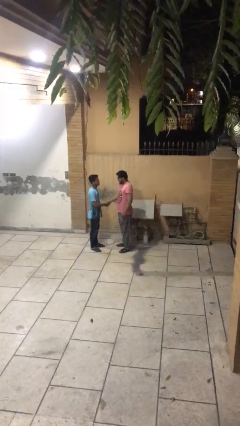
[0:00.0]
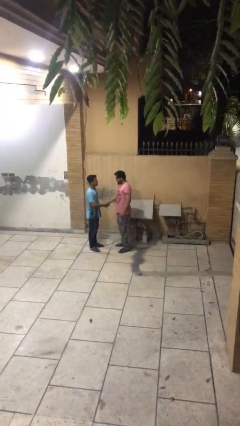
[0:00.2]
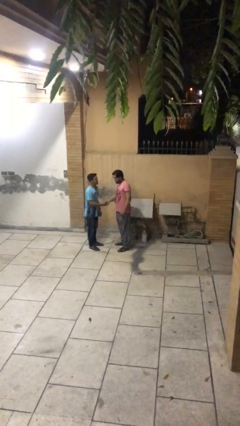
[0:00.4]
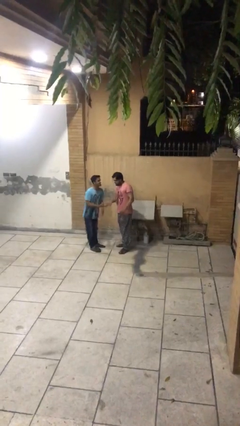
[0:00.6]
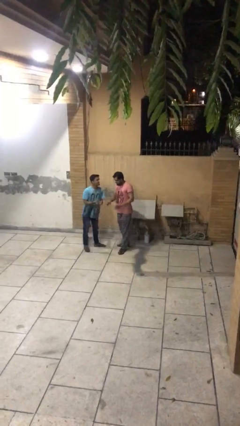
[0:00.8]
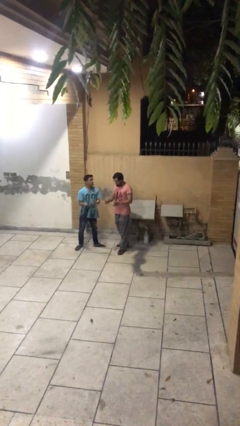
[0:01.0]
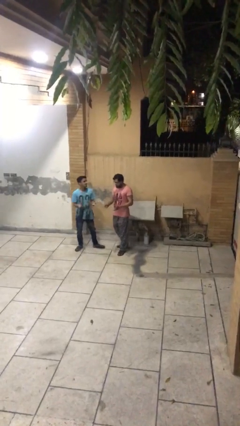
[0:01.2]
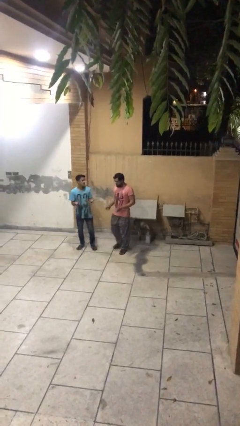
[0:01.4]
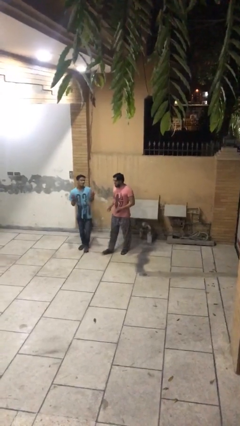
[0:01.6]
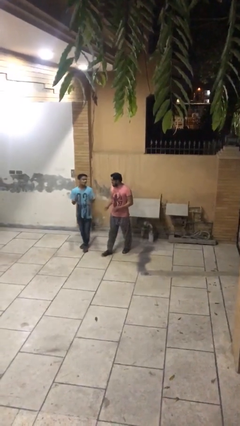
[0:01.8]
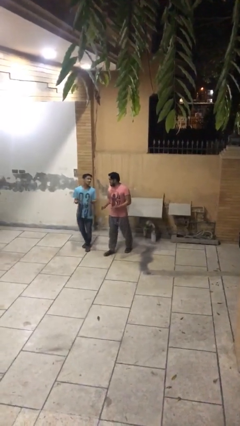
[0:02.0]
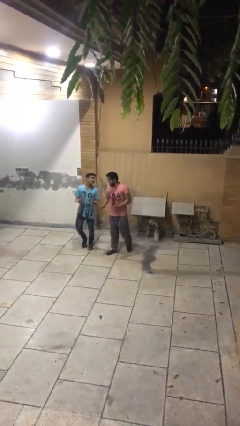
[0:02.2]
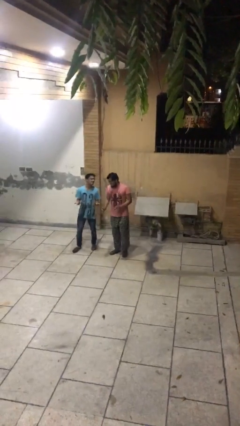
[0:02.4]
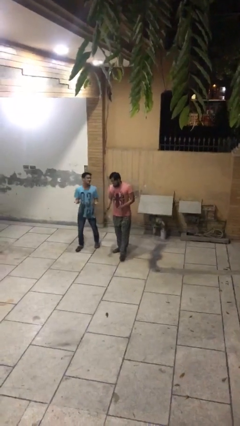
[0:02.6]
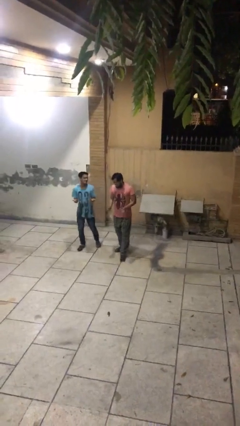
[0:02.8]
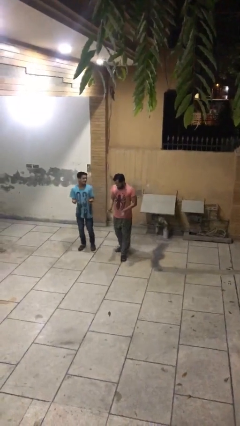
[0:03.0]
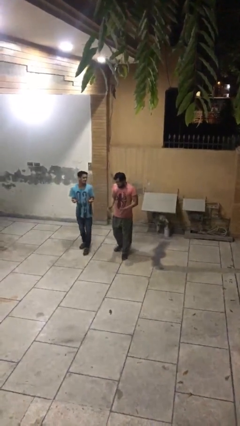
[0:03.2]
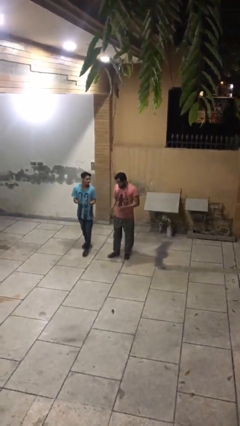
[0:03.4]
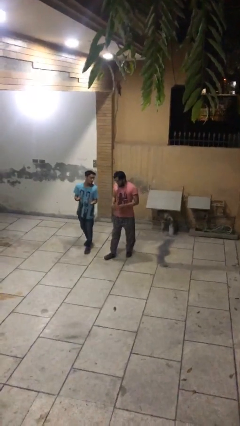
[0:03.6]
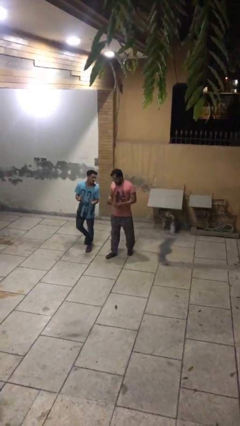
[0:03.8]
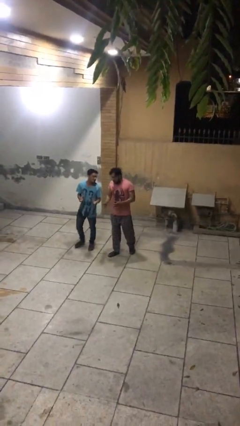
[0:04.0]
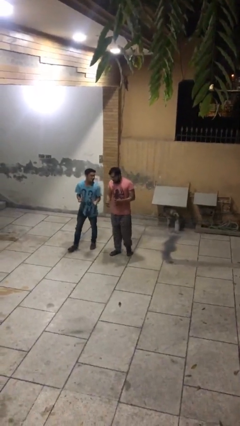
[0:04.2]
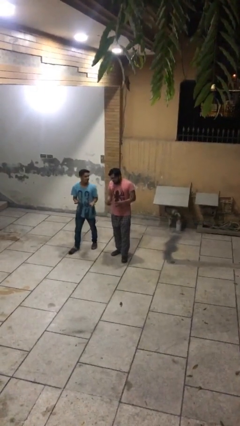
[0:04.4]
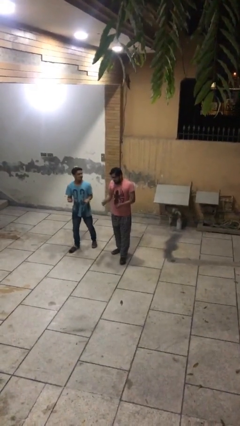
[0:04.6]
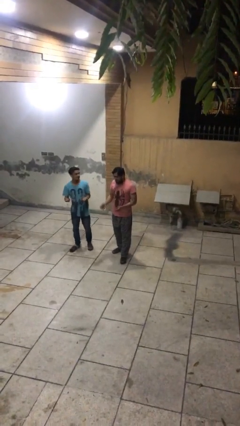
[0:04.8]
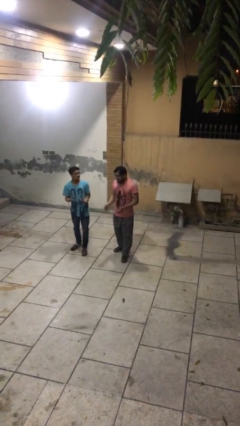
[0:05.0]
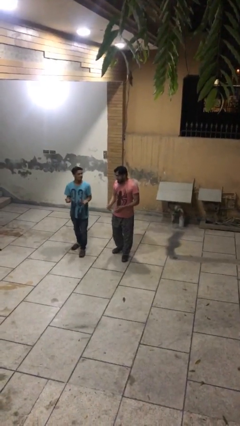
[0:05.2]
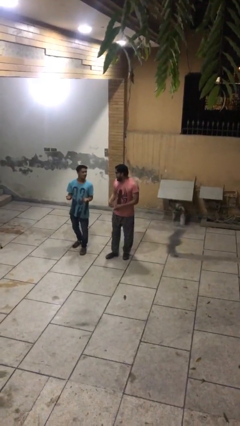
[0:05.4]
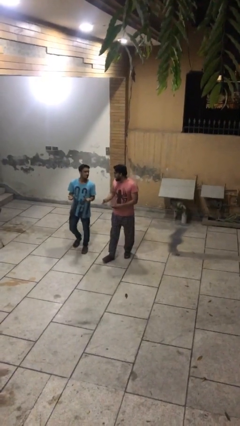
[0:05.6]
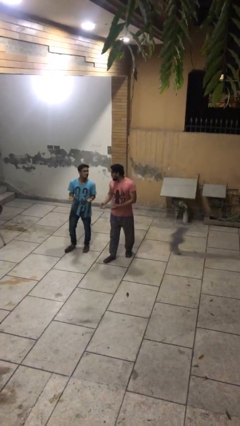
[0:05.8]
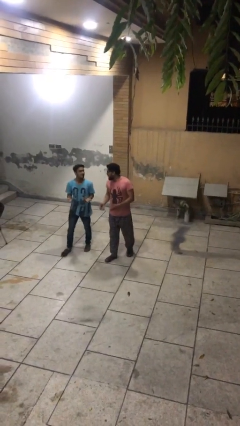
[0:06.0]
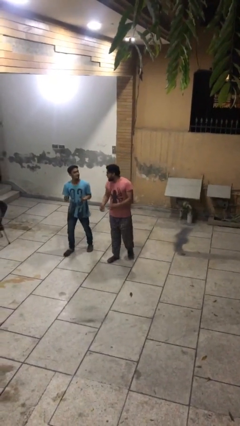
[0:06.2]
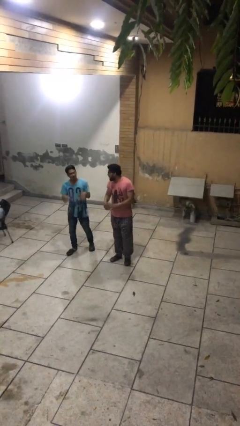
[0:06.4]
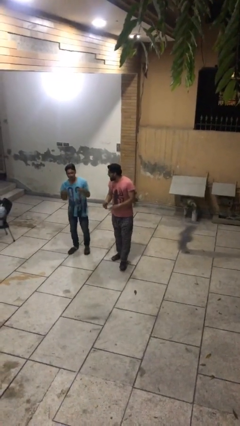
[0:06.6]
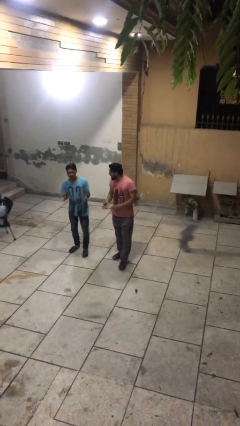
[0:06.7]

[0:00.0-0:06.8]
person talks to person

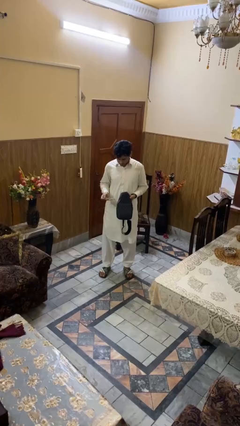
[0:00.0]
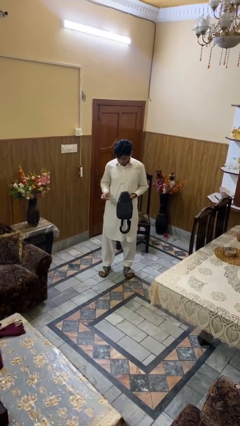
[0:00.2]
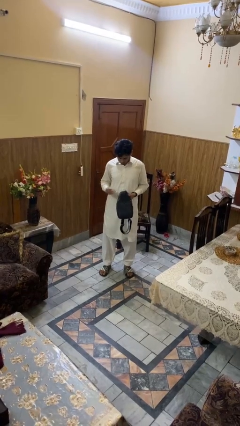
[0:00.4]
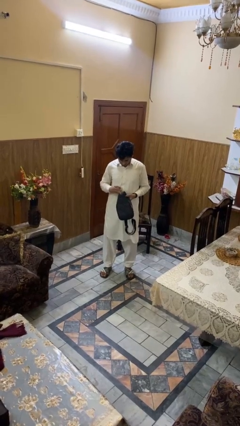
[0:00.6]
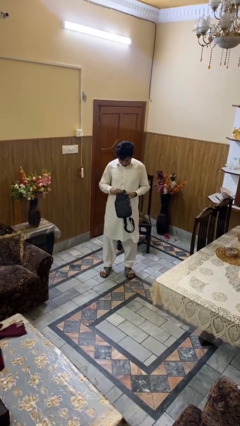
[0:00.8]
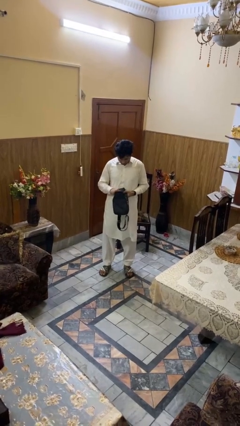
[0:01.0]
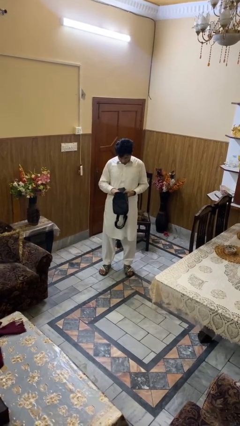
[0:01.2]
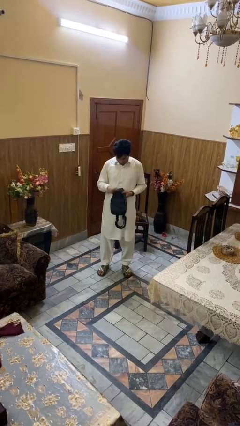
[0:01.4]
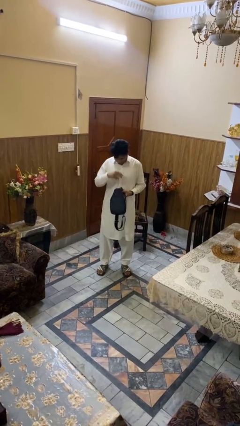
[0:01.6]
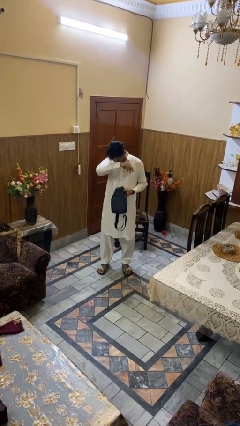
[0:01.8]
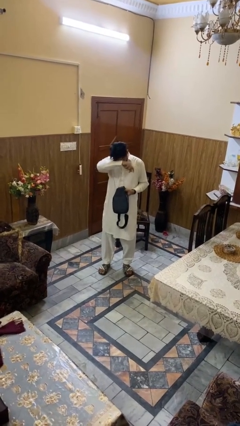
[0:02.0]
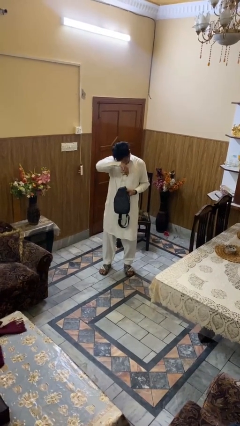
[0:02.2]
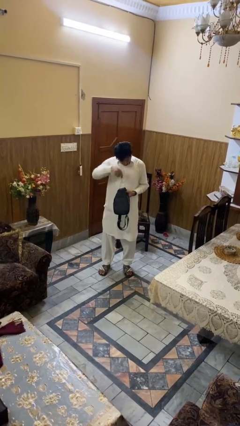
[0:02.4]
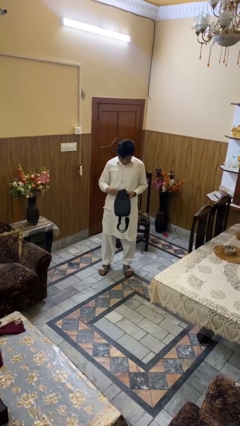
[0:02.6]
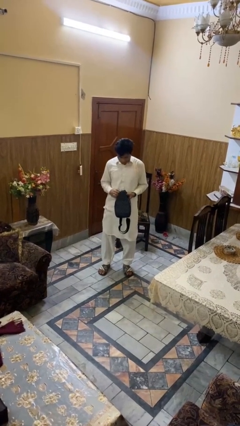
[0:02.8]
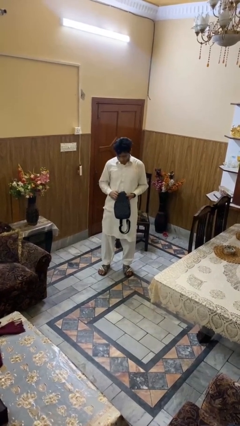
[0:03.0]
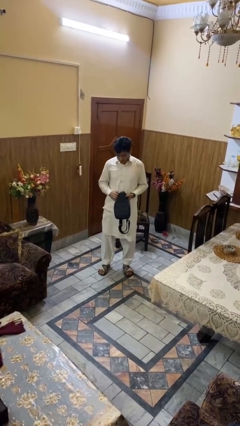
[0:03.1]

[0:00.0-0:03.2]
person puts object into purse

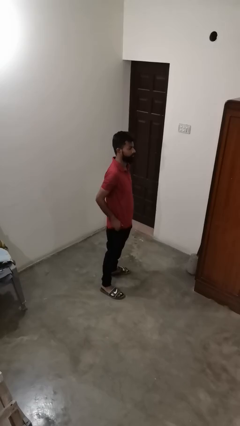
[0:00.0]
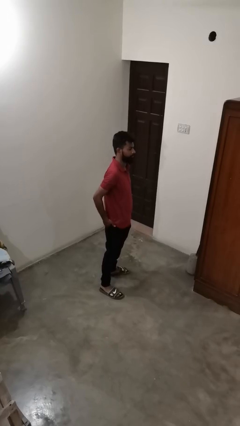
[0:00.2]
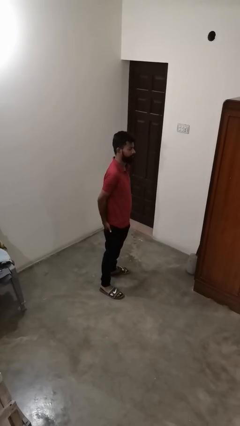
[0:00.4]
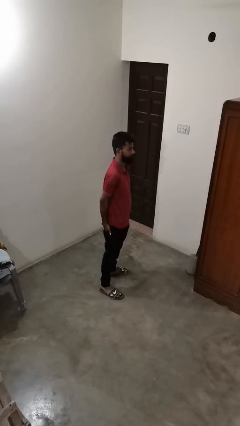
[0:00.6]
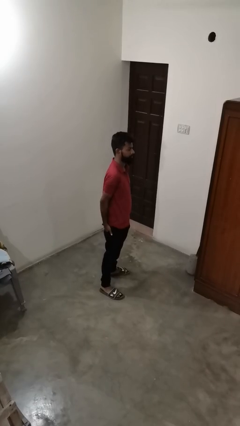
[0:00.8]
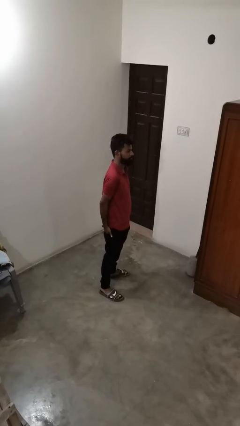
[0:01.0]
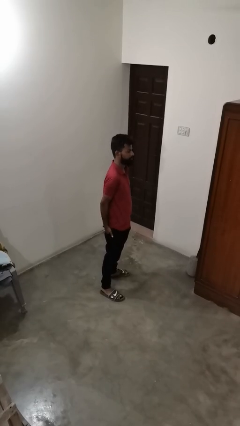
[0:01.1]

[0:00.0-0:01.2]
person puts hands in back pockets

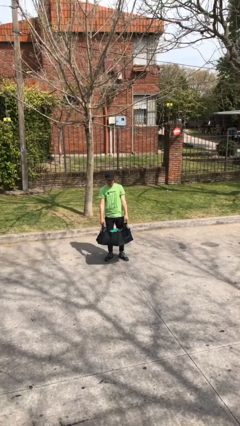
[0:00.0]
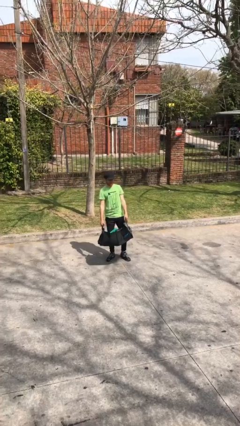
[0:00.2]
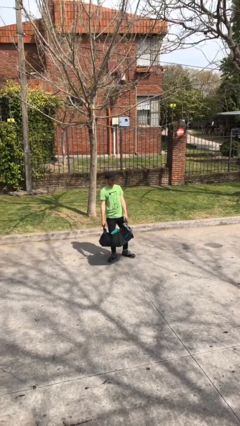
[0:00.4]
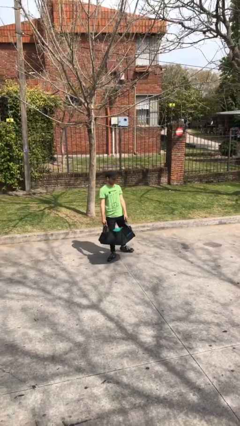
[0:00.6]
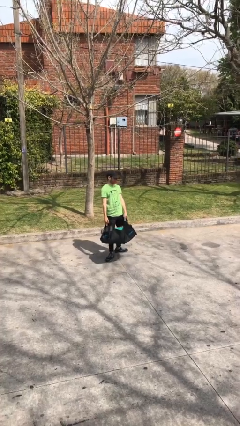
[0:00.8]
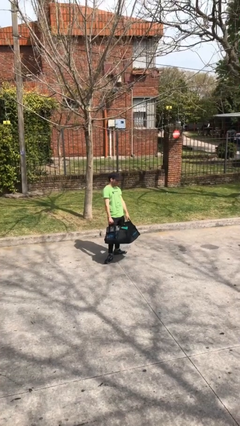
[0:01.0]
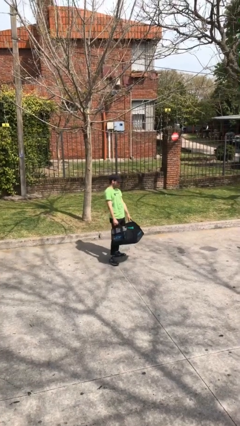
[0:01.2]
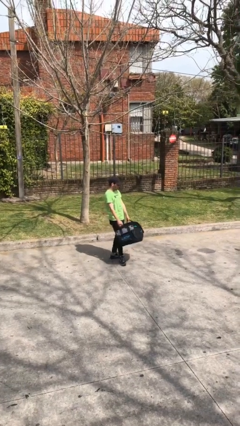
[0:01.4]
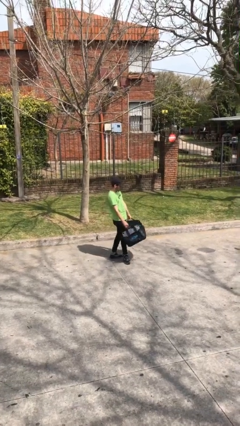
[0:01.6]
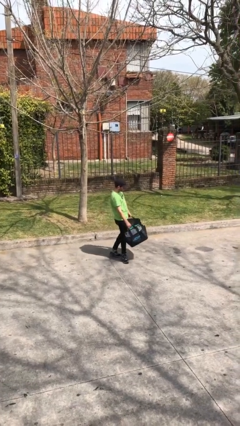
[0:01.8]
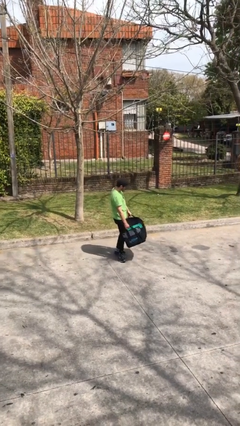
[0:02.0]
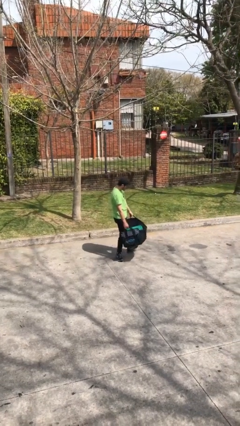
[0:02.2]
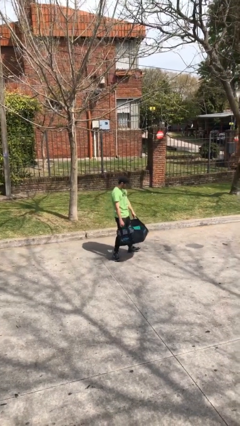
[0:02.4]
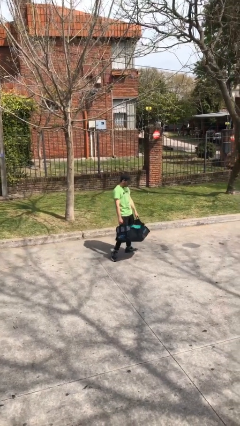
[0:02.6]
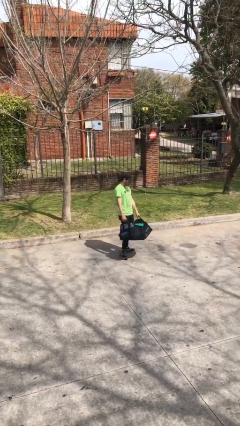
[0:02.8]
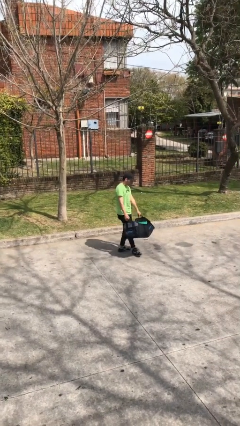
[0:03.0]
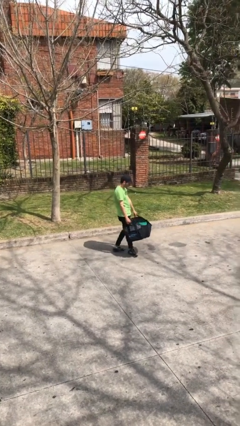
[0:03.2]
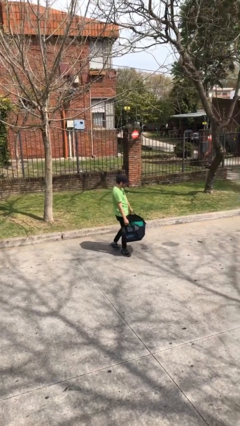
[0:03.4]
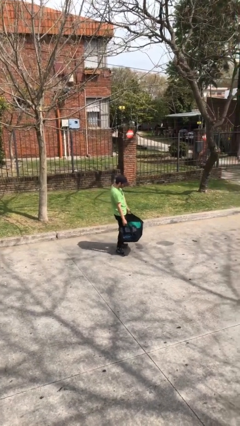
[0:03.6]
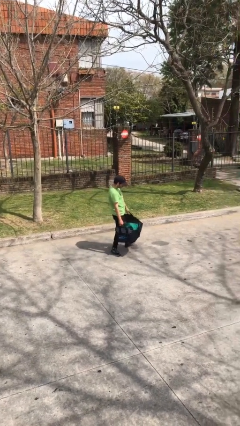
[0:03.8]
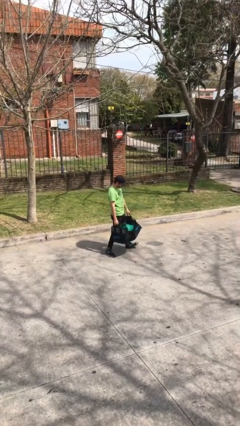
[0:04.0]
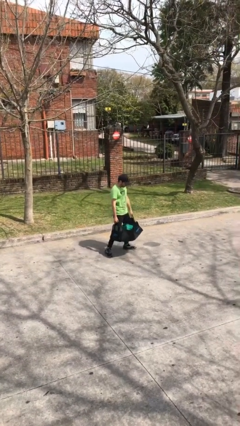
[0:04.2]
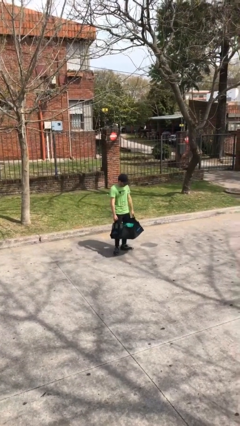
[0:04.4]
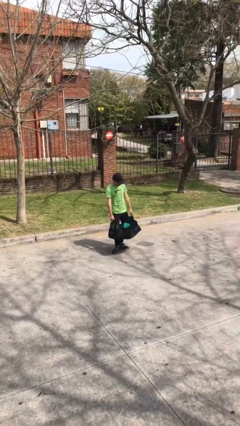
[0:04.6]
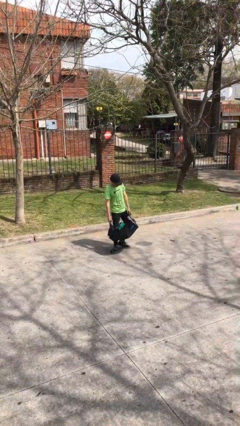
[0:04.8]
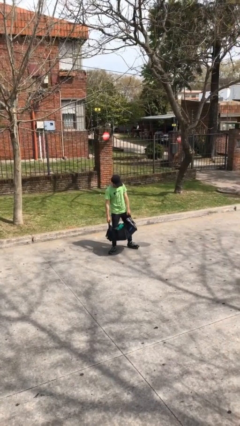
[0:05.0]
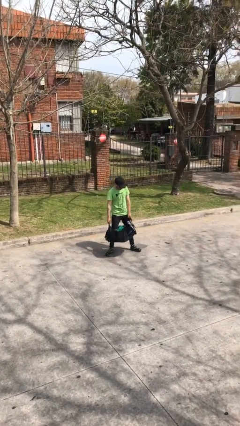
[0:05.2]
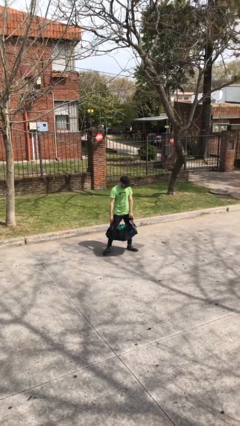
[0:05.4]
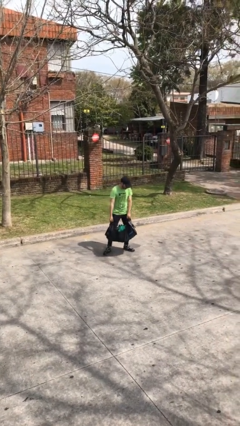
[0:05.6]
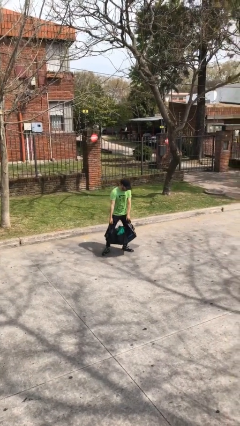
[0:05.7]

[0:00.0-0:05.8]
person carries heavy object

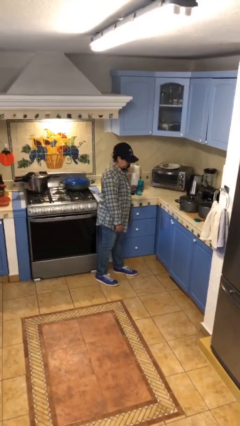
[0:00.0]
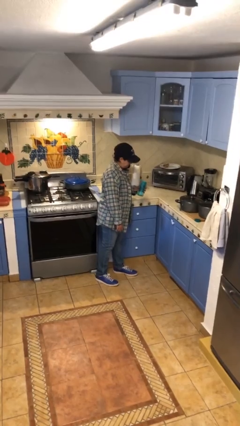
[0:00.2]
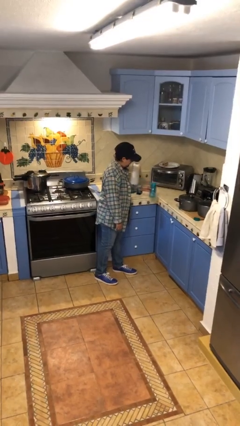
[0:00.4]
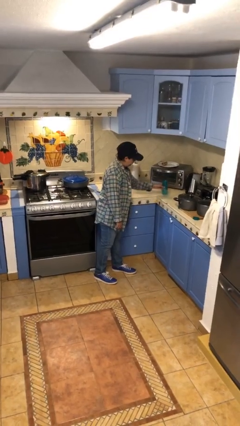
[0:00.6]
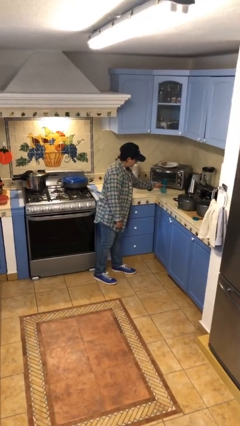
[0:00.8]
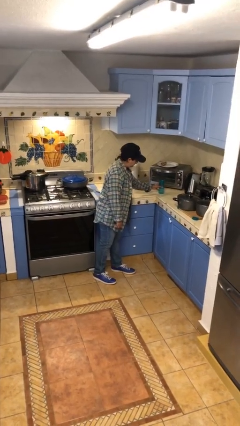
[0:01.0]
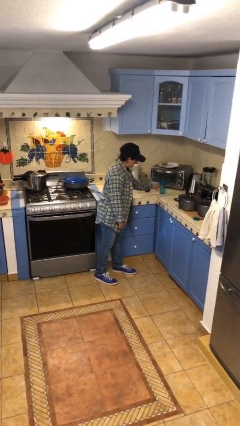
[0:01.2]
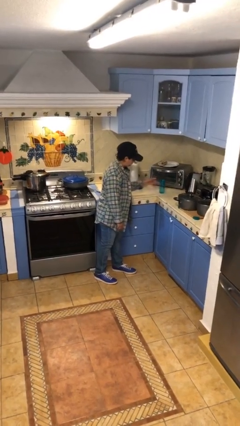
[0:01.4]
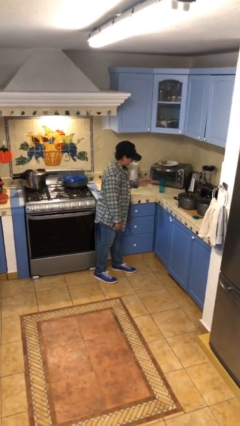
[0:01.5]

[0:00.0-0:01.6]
person puts down object on countertop
